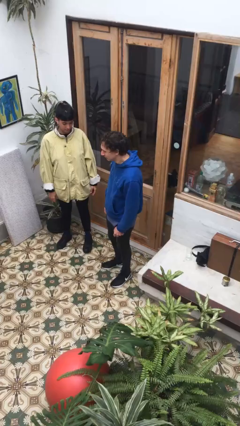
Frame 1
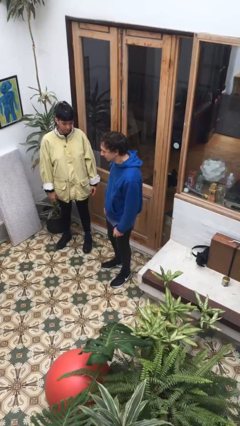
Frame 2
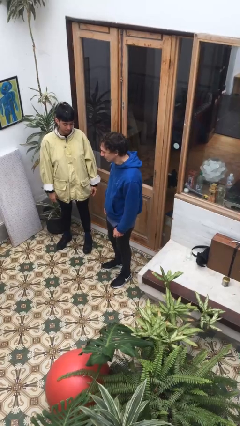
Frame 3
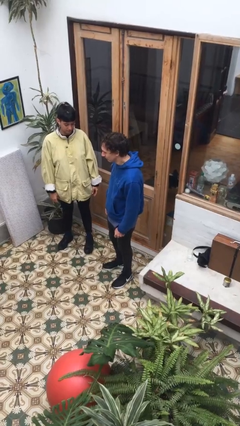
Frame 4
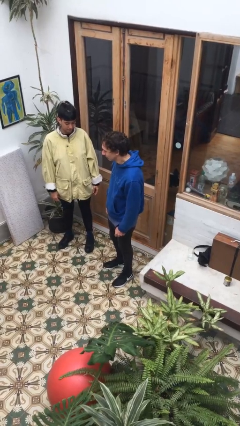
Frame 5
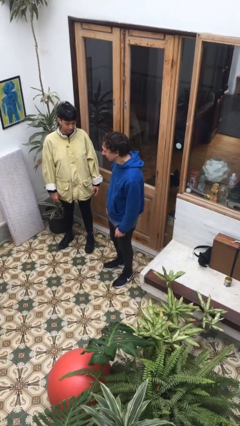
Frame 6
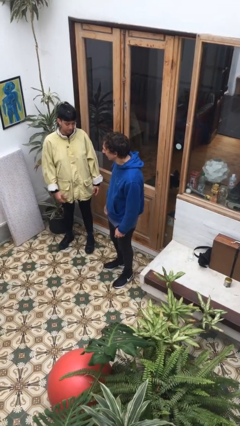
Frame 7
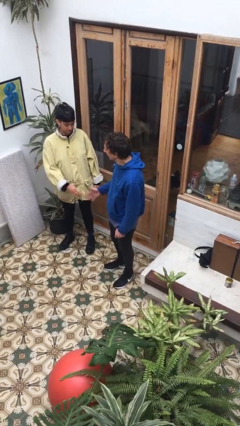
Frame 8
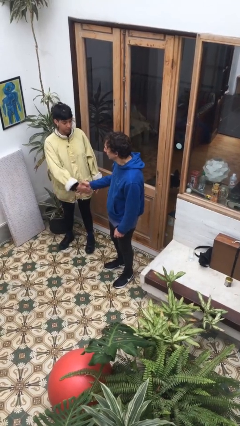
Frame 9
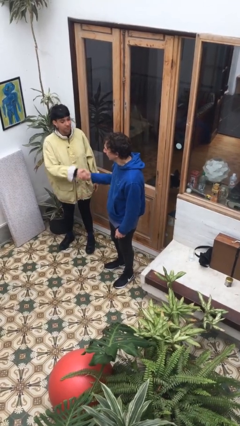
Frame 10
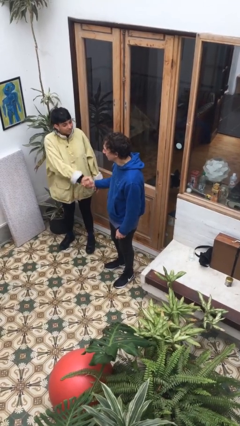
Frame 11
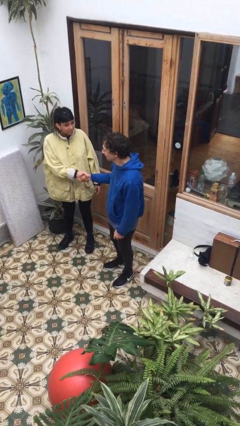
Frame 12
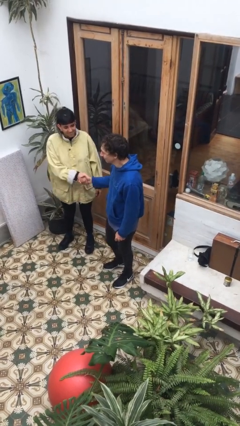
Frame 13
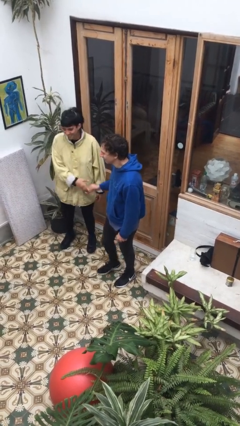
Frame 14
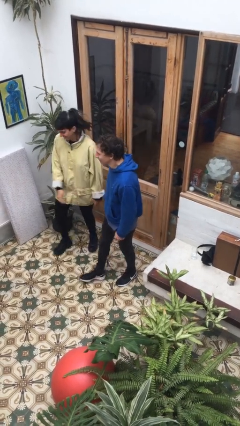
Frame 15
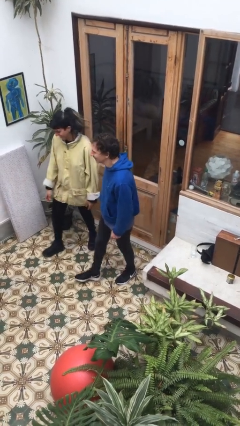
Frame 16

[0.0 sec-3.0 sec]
person shakes hand

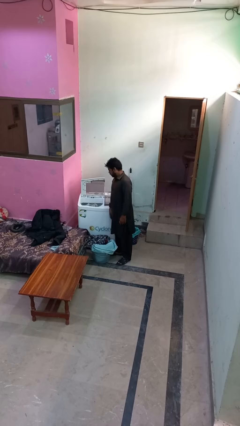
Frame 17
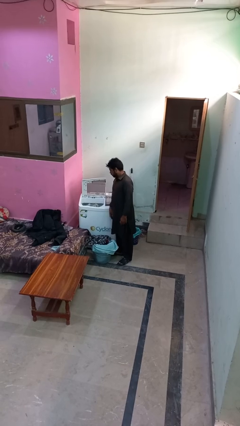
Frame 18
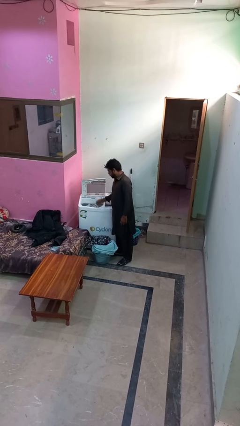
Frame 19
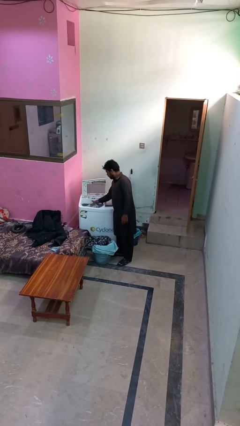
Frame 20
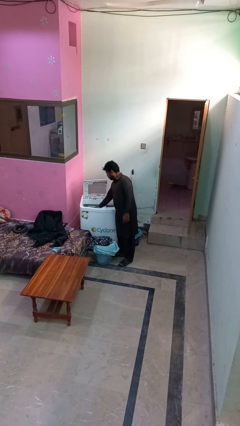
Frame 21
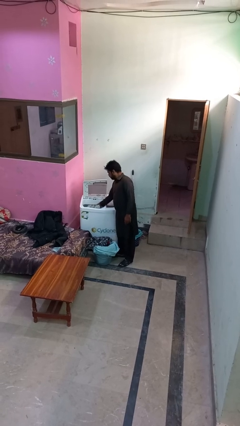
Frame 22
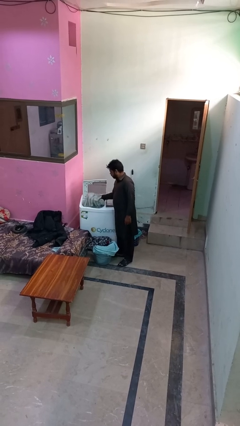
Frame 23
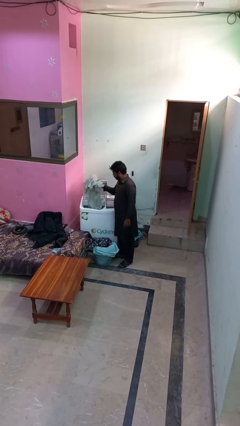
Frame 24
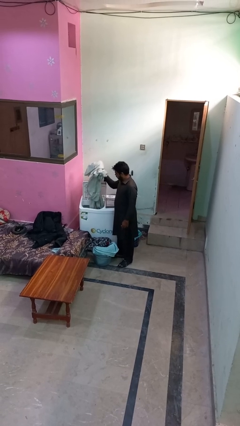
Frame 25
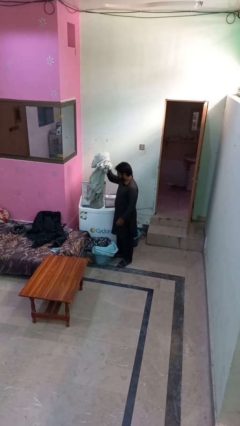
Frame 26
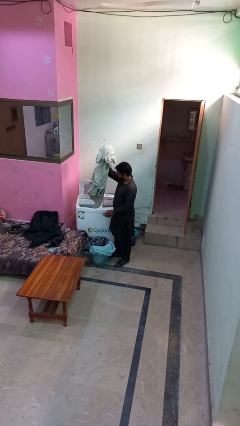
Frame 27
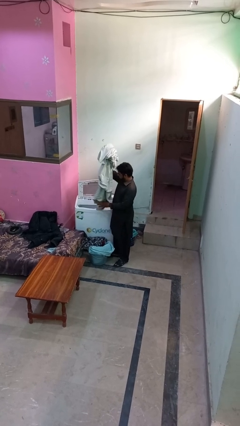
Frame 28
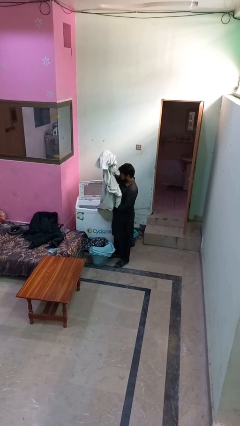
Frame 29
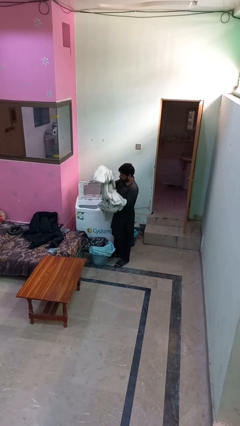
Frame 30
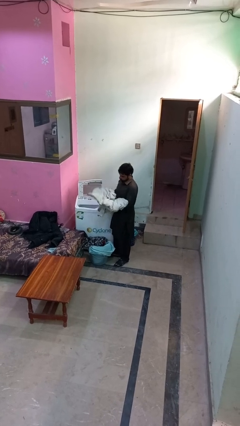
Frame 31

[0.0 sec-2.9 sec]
person unloads clotheswasher

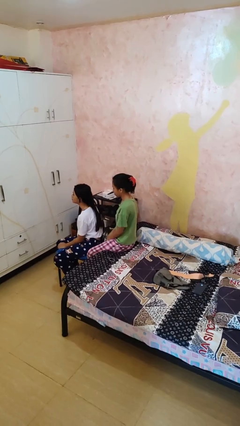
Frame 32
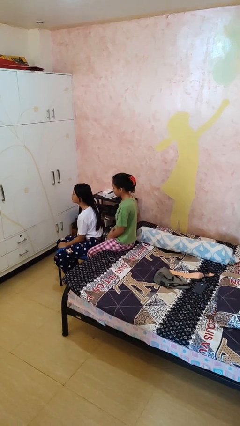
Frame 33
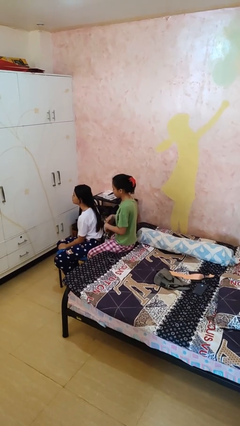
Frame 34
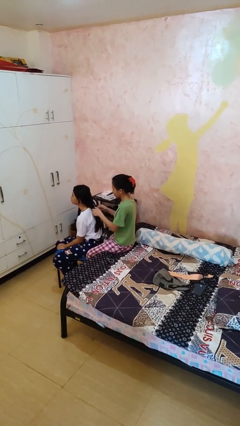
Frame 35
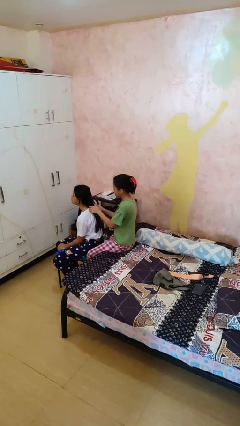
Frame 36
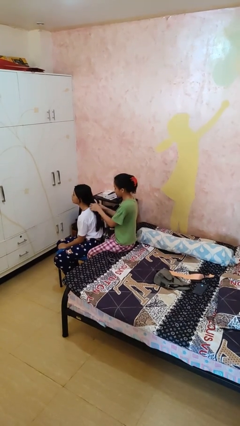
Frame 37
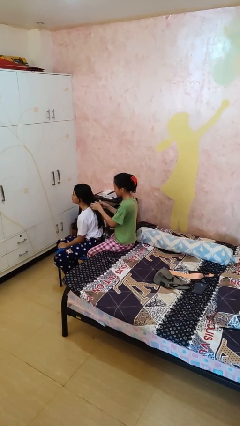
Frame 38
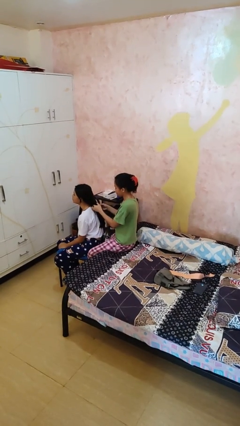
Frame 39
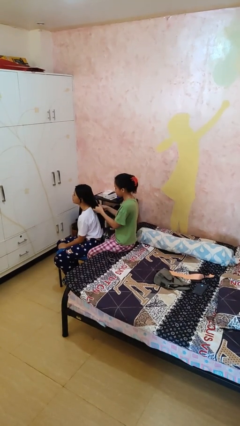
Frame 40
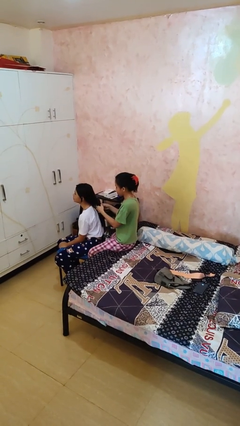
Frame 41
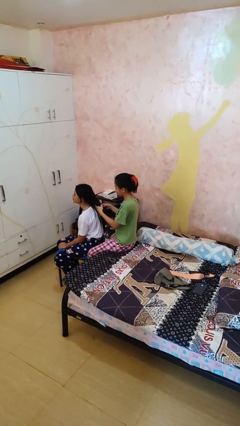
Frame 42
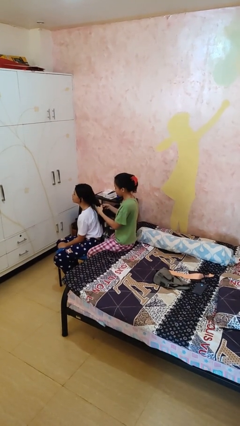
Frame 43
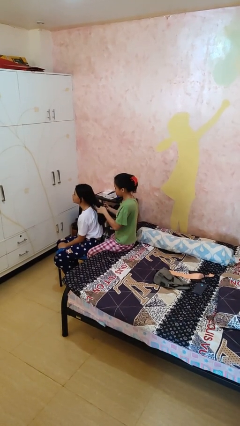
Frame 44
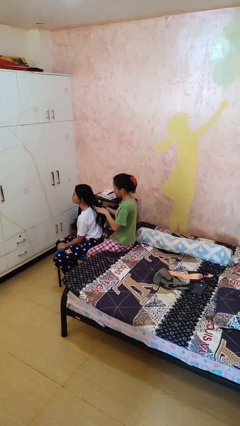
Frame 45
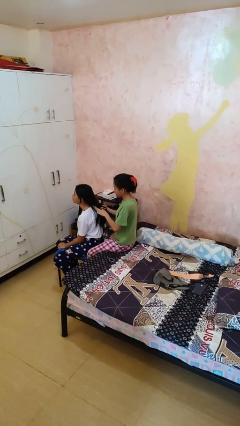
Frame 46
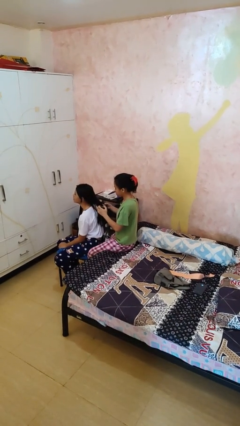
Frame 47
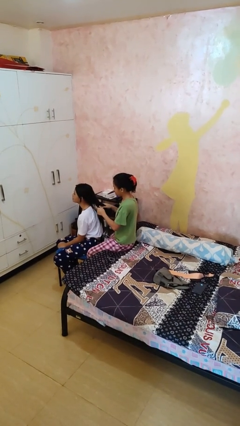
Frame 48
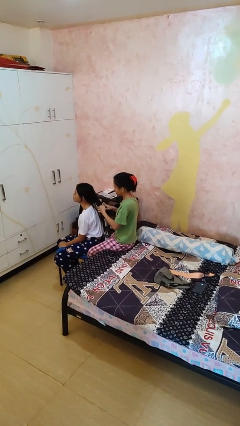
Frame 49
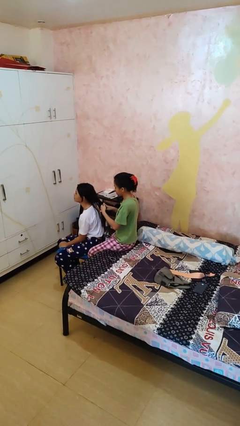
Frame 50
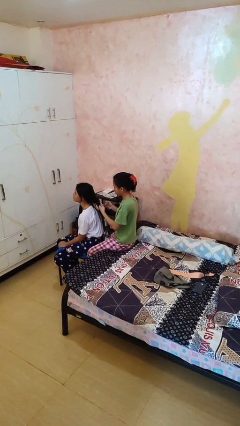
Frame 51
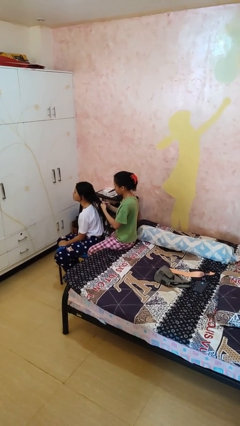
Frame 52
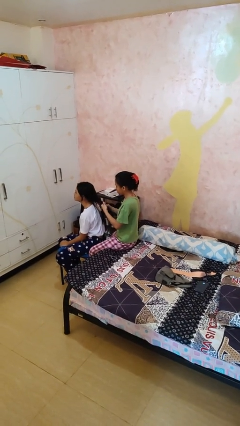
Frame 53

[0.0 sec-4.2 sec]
person braids hair of person

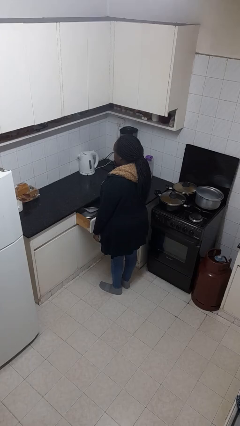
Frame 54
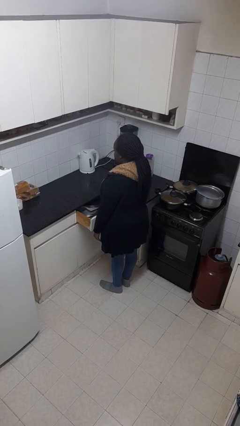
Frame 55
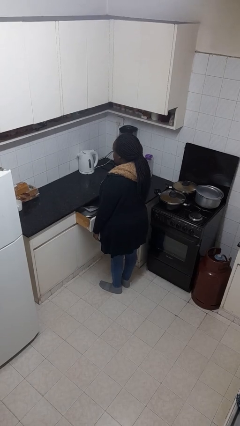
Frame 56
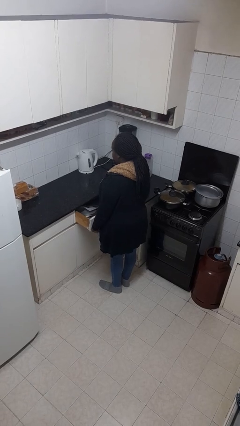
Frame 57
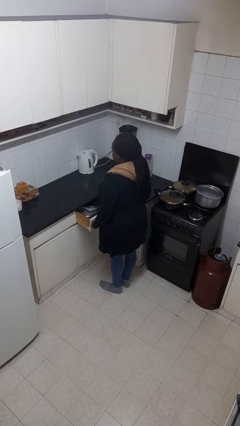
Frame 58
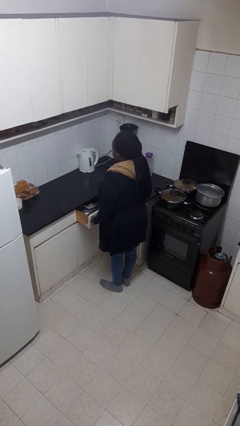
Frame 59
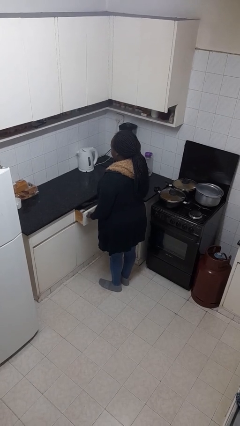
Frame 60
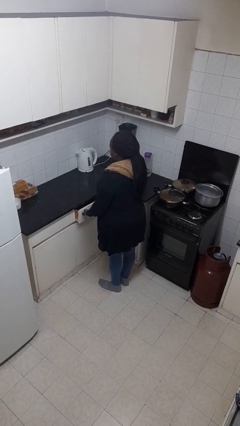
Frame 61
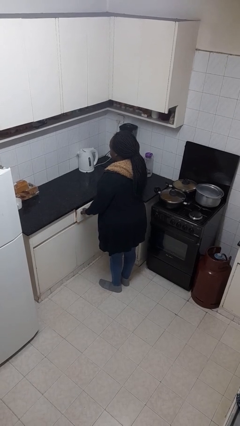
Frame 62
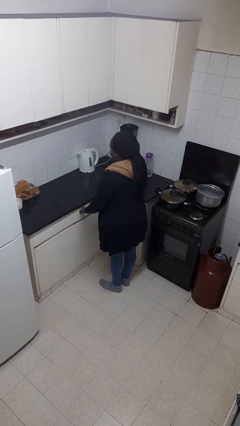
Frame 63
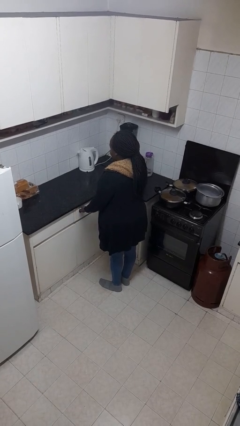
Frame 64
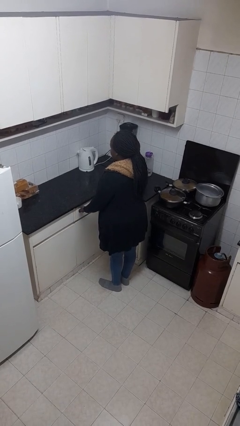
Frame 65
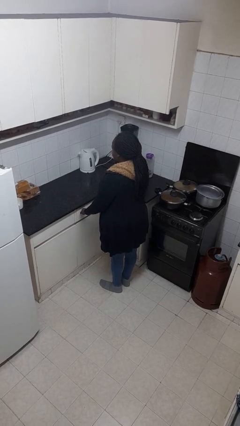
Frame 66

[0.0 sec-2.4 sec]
person closes kitchen drawer

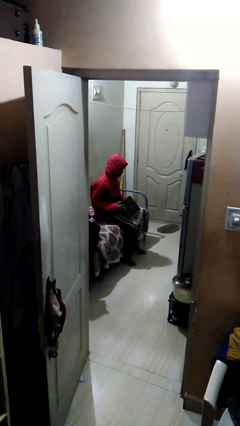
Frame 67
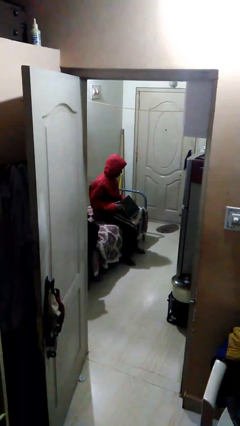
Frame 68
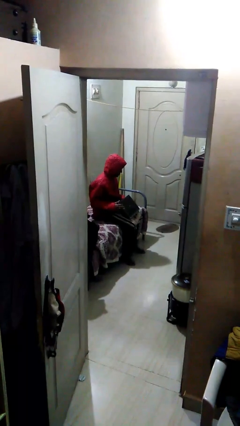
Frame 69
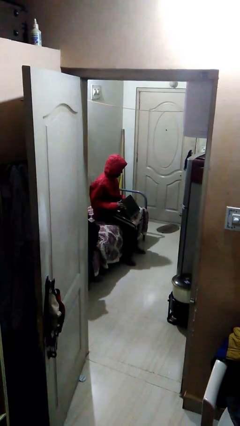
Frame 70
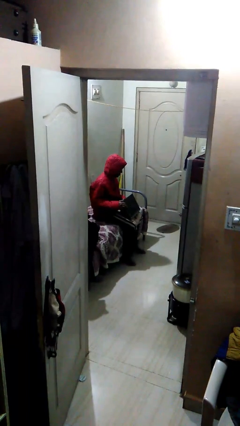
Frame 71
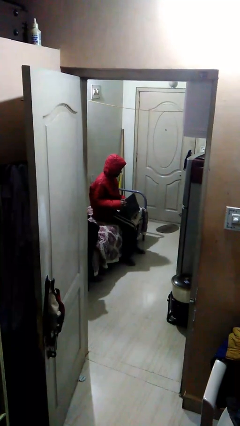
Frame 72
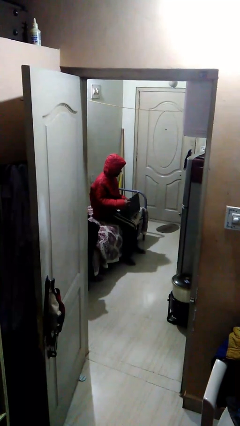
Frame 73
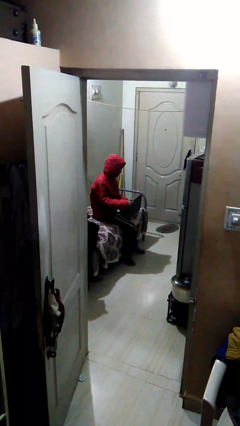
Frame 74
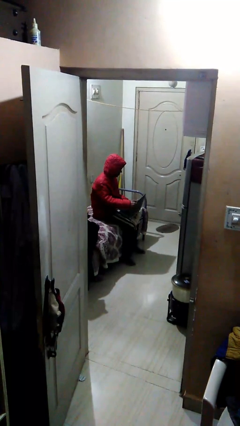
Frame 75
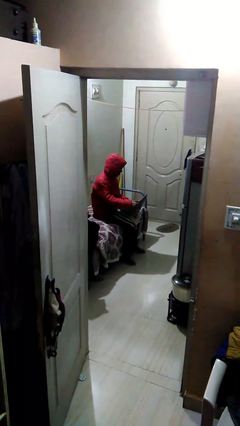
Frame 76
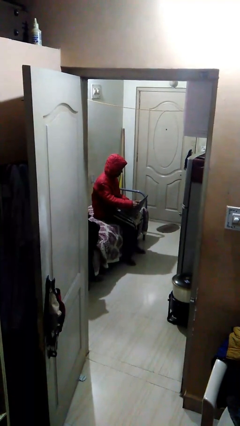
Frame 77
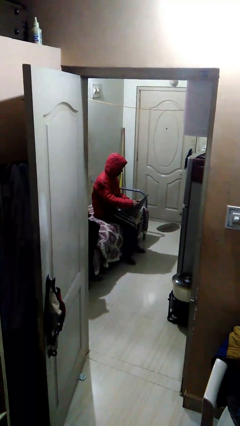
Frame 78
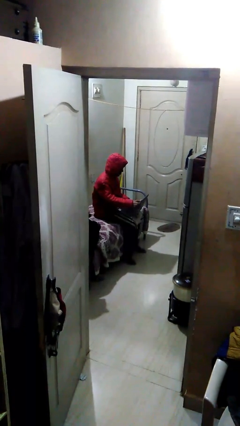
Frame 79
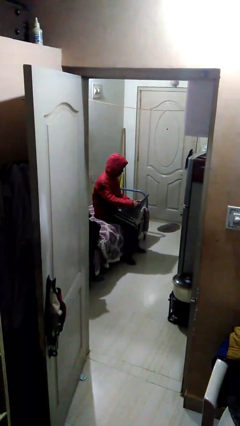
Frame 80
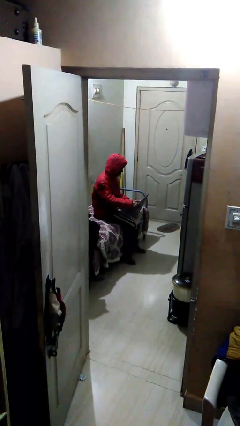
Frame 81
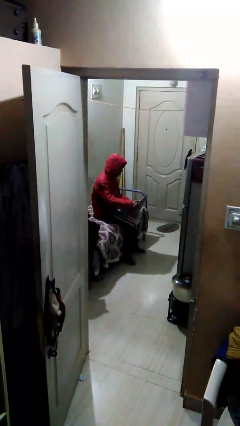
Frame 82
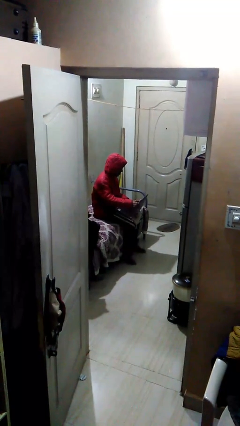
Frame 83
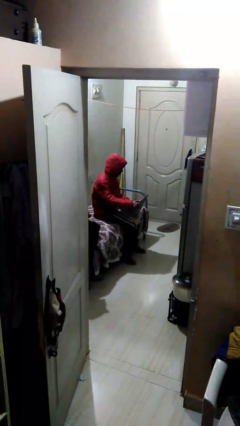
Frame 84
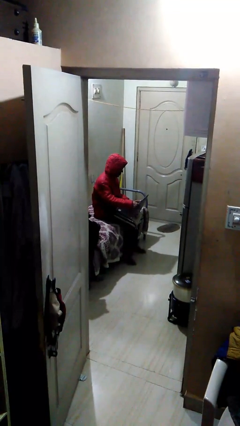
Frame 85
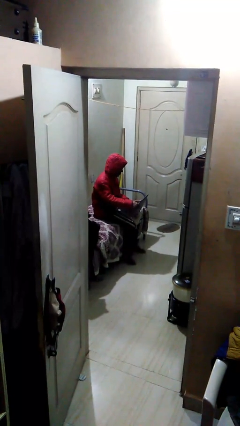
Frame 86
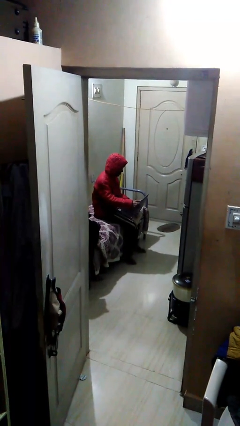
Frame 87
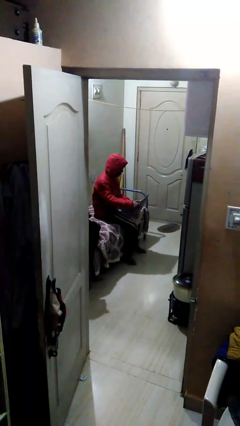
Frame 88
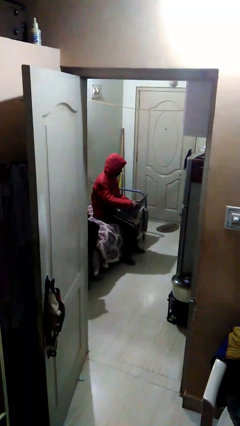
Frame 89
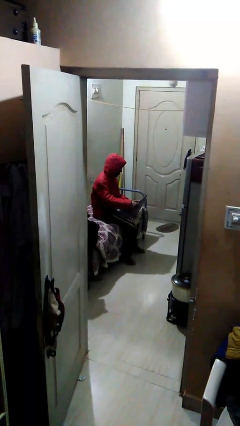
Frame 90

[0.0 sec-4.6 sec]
person interacts with laptop

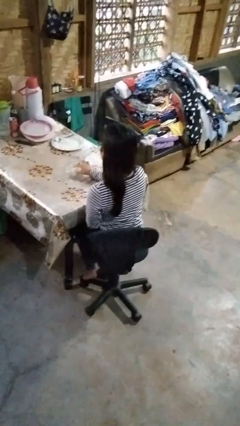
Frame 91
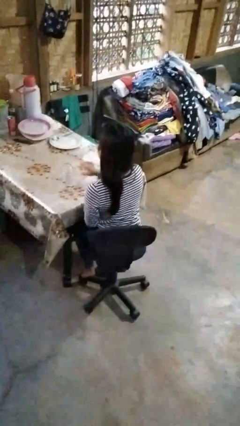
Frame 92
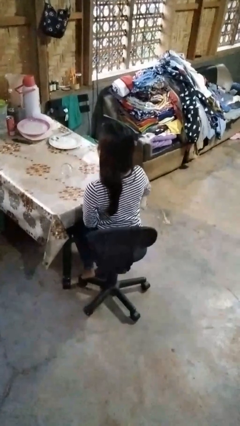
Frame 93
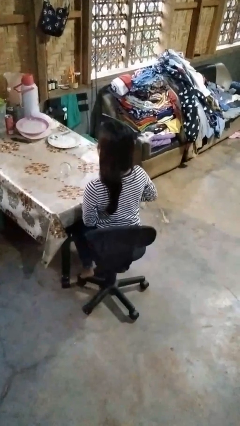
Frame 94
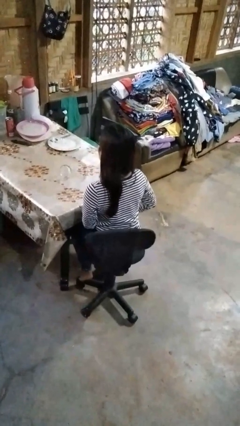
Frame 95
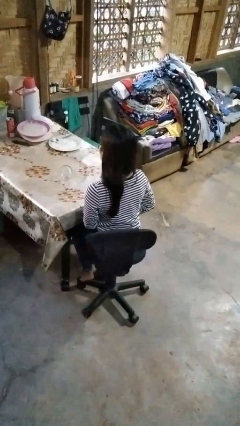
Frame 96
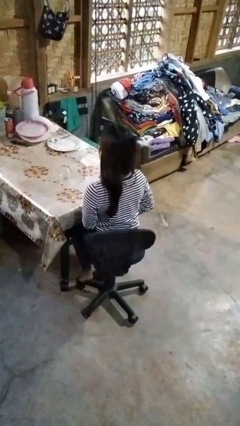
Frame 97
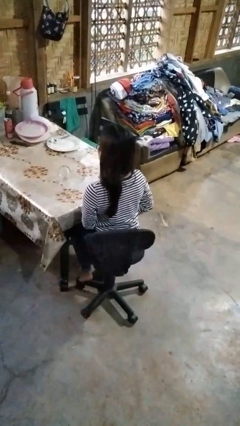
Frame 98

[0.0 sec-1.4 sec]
person knocks over glass
